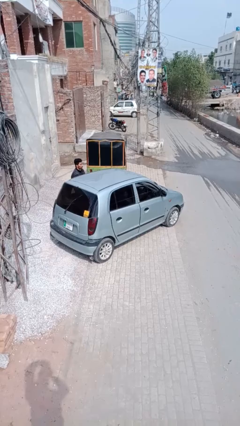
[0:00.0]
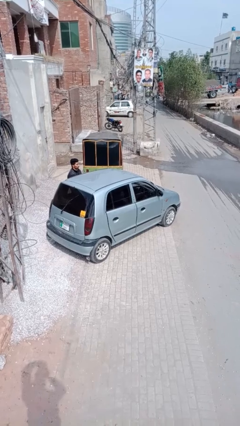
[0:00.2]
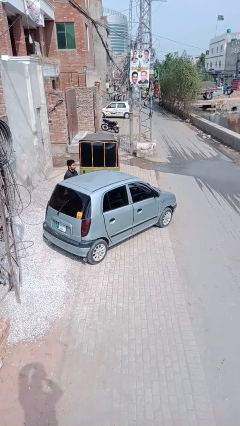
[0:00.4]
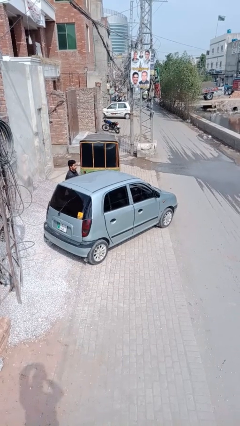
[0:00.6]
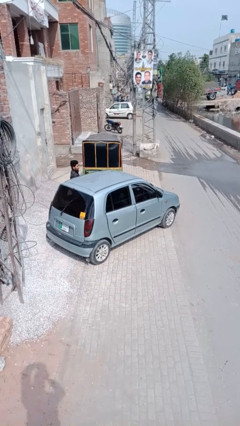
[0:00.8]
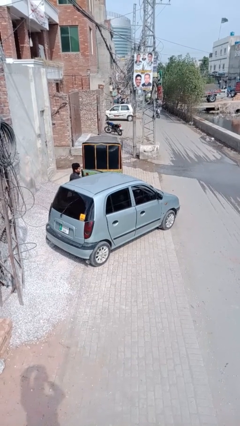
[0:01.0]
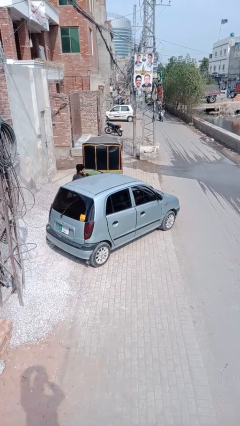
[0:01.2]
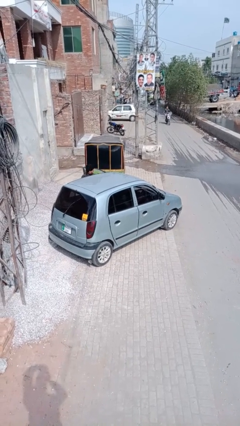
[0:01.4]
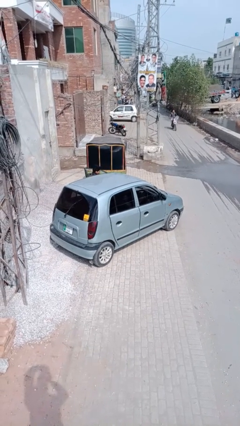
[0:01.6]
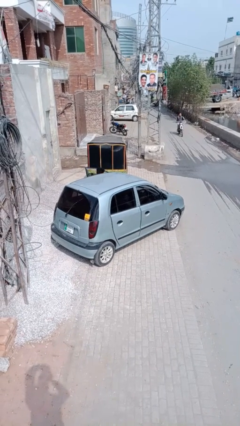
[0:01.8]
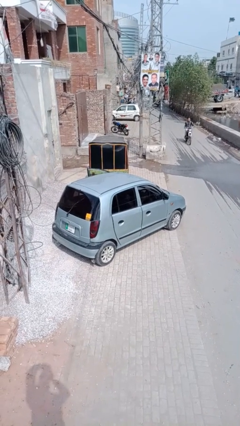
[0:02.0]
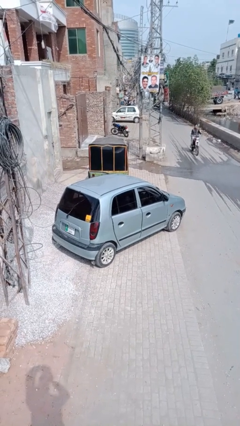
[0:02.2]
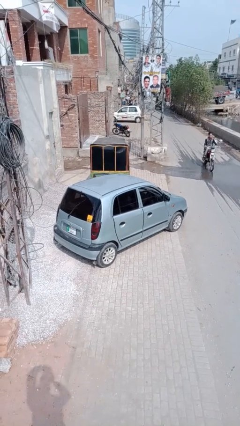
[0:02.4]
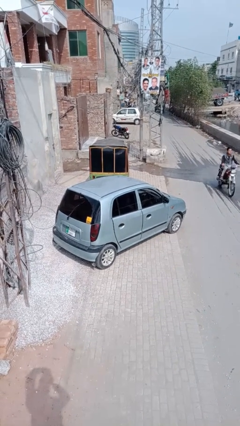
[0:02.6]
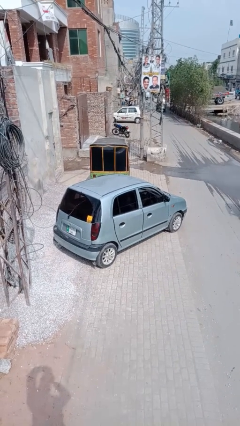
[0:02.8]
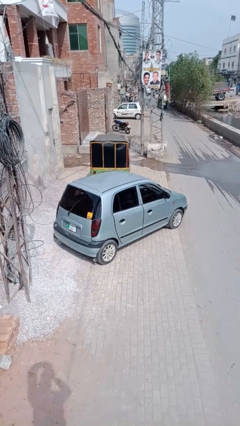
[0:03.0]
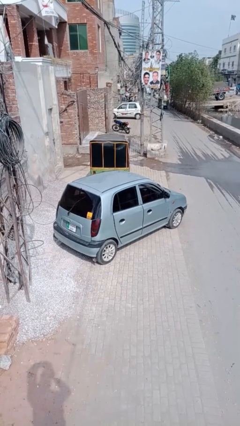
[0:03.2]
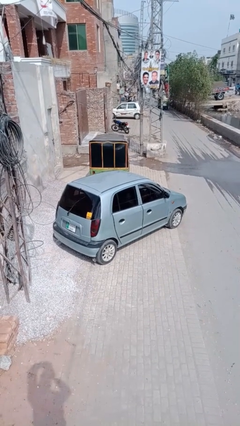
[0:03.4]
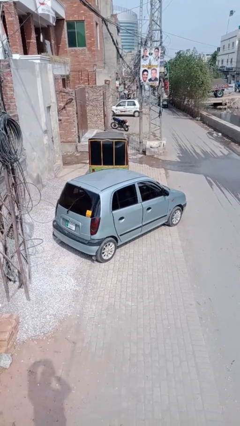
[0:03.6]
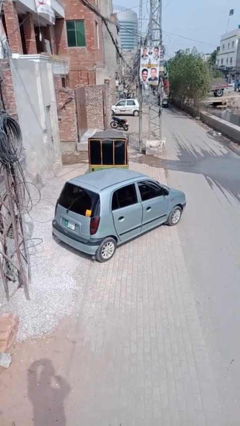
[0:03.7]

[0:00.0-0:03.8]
car picks up person

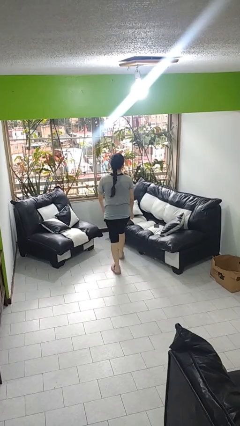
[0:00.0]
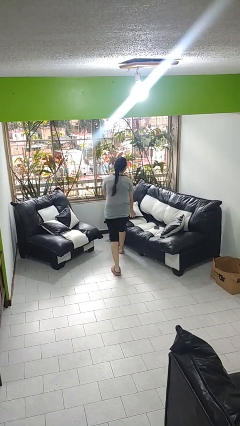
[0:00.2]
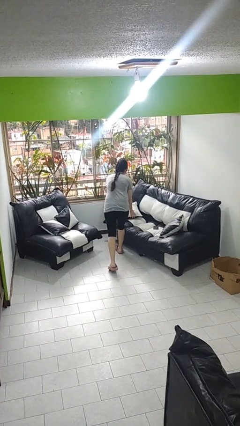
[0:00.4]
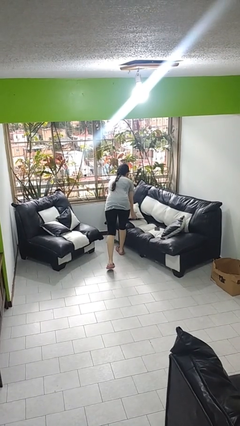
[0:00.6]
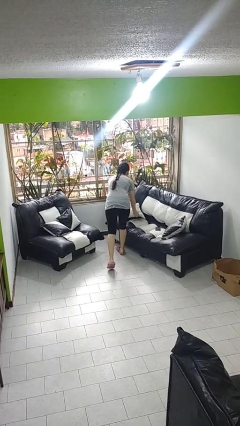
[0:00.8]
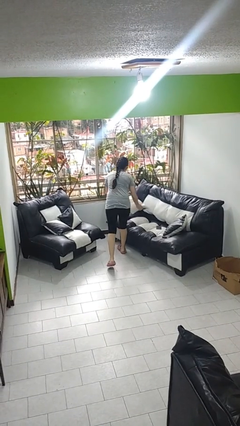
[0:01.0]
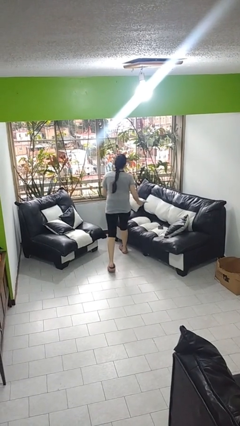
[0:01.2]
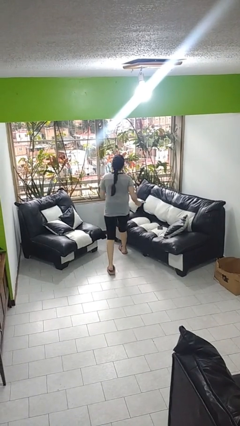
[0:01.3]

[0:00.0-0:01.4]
person picks up object from couch

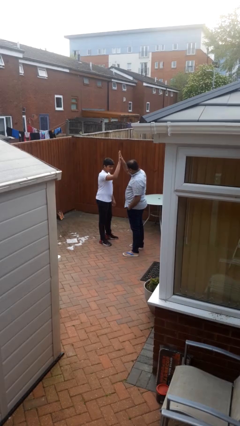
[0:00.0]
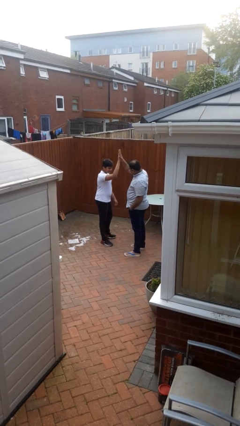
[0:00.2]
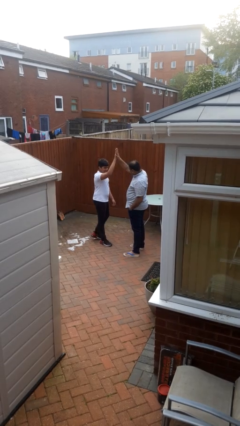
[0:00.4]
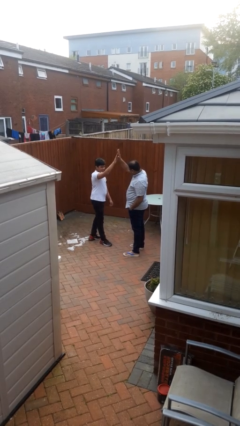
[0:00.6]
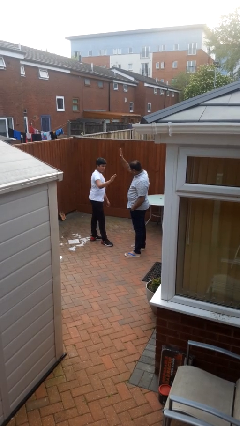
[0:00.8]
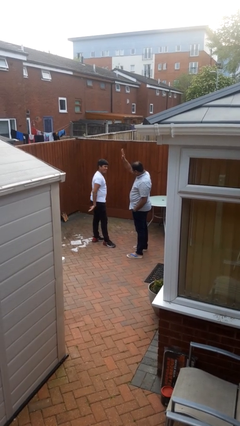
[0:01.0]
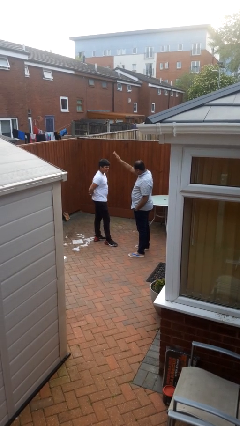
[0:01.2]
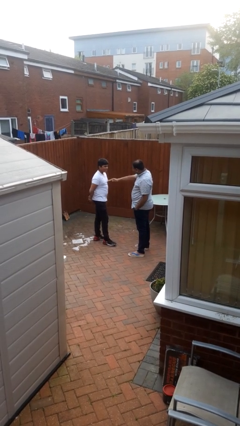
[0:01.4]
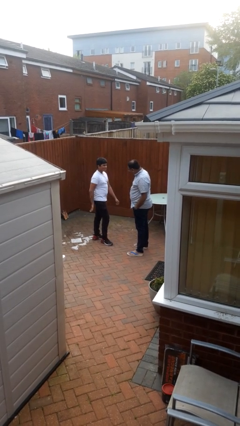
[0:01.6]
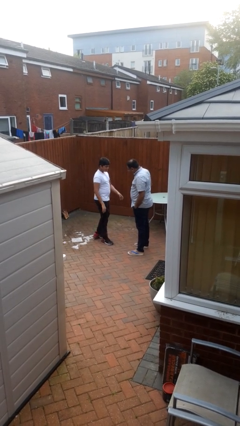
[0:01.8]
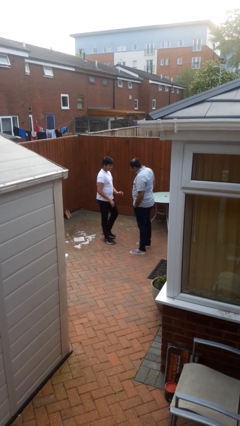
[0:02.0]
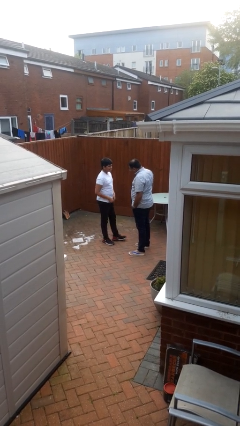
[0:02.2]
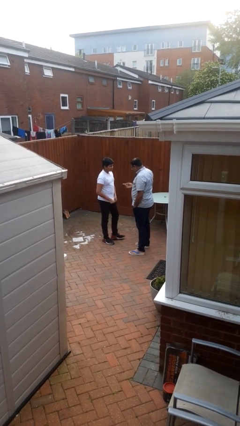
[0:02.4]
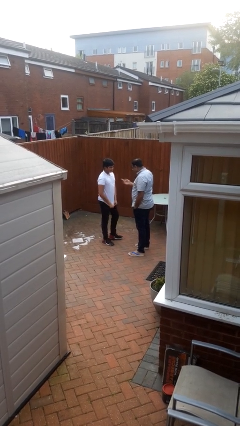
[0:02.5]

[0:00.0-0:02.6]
person highfives hand

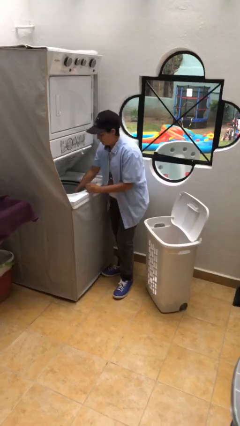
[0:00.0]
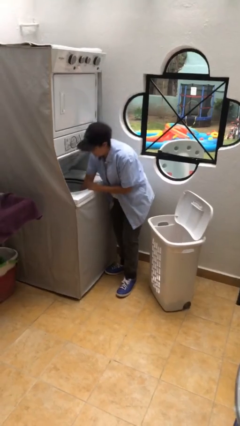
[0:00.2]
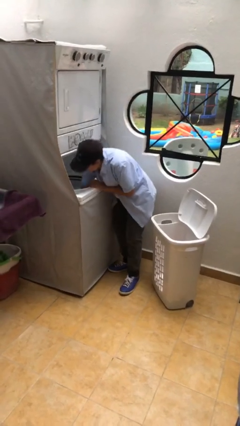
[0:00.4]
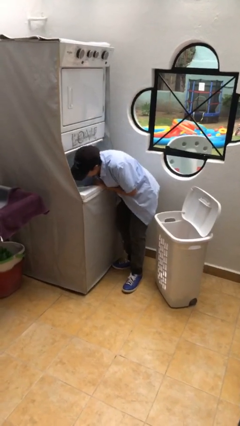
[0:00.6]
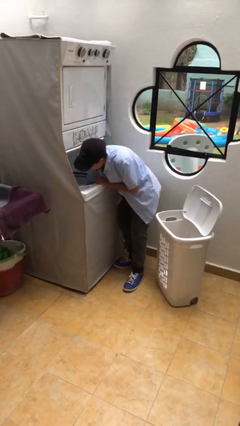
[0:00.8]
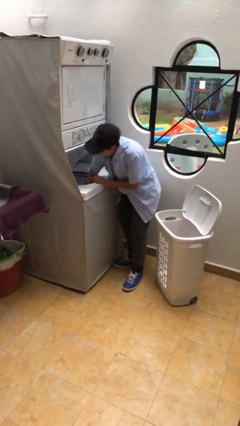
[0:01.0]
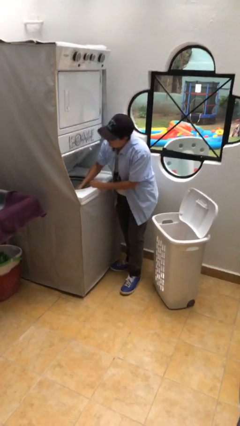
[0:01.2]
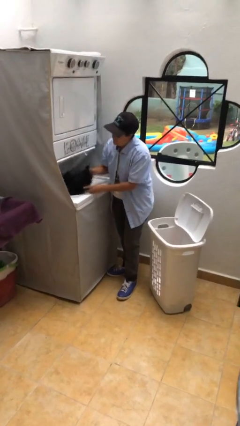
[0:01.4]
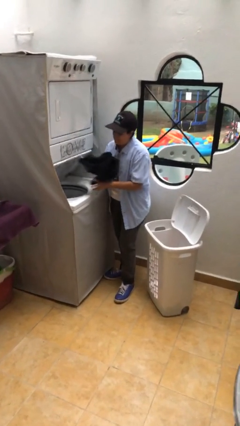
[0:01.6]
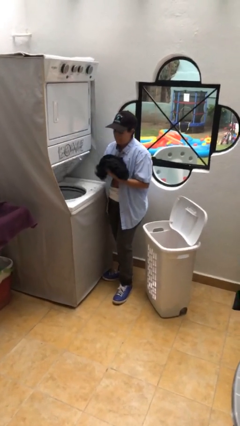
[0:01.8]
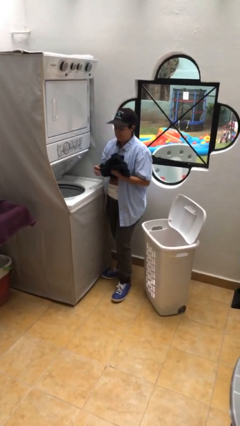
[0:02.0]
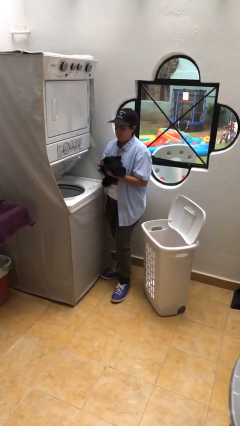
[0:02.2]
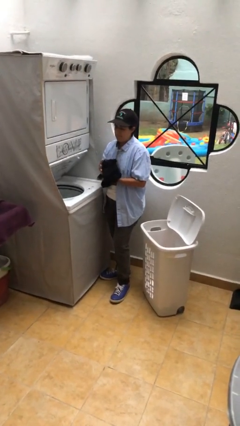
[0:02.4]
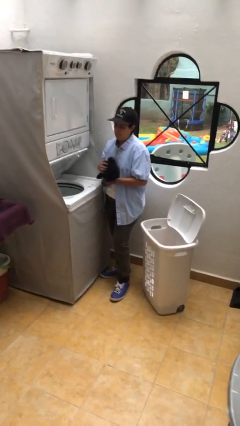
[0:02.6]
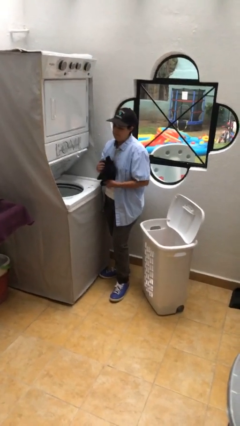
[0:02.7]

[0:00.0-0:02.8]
person unloads clotheswasher

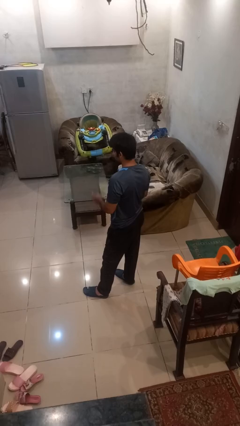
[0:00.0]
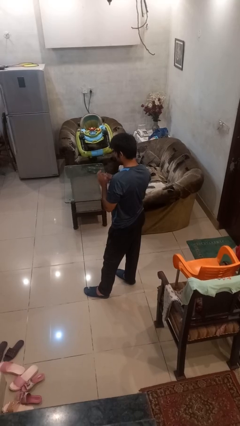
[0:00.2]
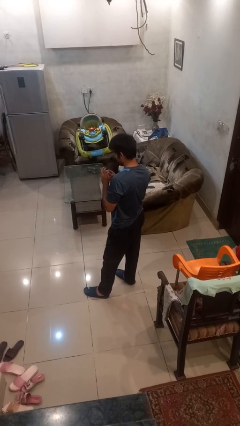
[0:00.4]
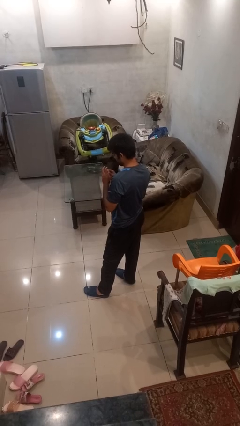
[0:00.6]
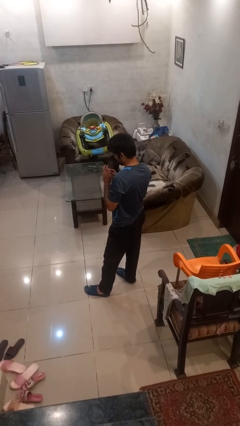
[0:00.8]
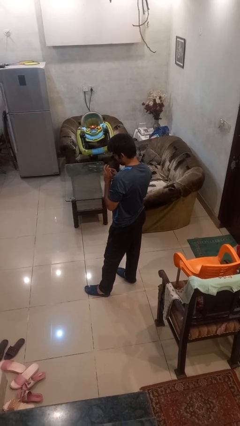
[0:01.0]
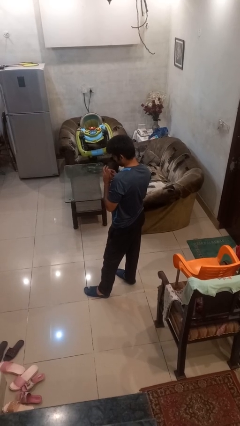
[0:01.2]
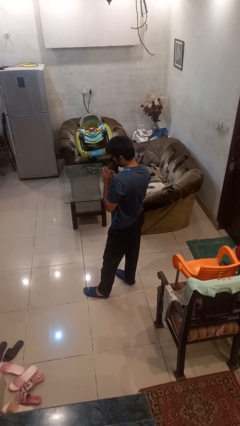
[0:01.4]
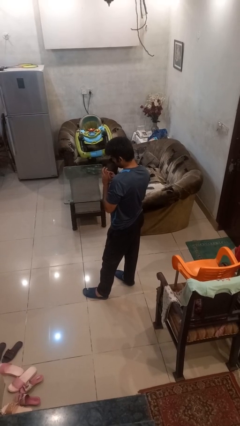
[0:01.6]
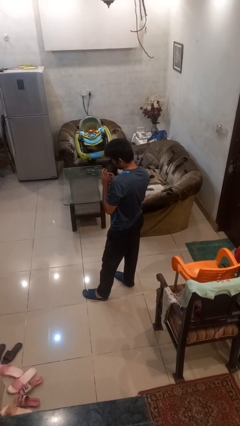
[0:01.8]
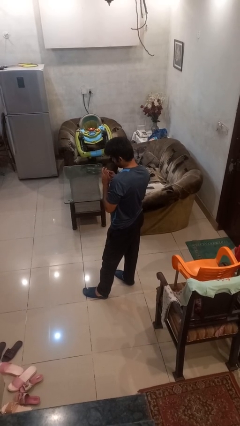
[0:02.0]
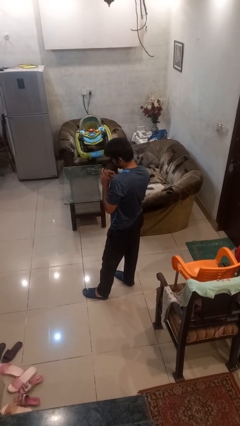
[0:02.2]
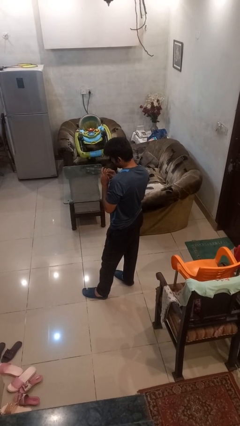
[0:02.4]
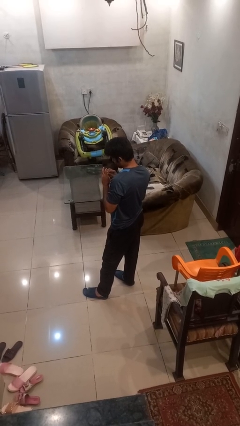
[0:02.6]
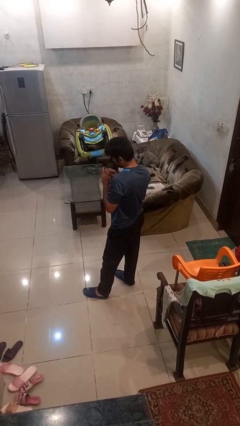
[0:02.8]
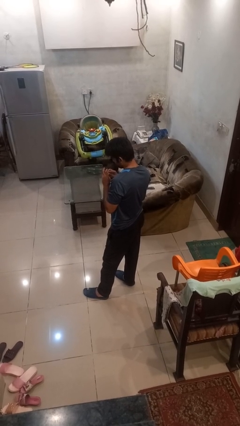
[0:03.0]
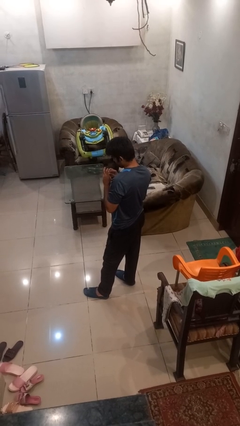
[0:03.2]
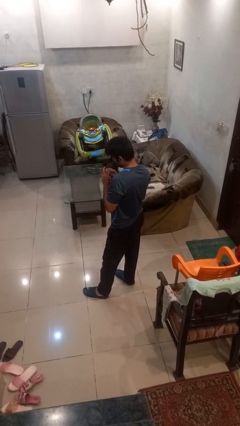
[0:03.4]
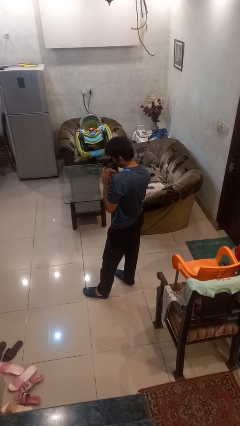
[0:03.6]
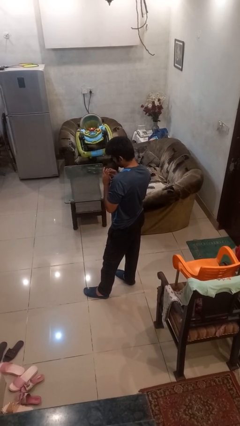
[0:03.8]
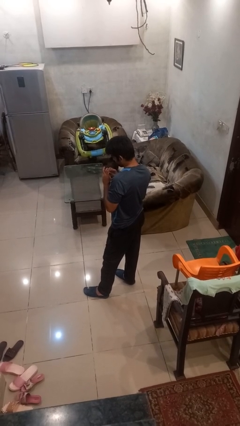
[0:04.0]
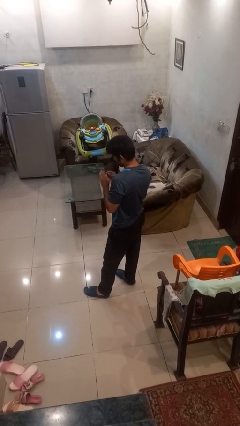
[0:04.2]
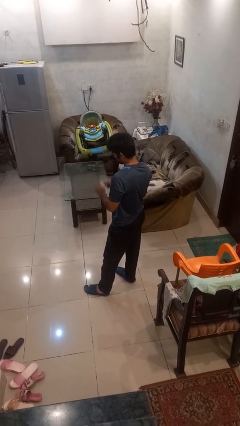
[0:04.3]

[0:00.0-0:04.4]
person files fingernails

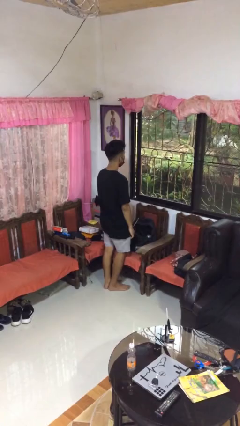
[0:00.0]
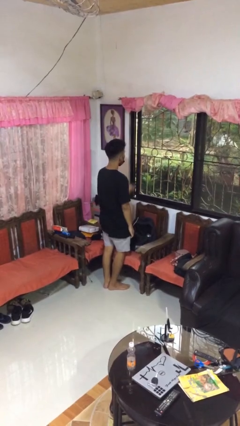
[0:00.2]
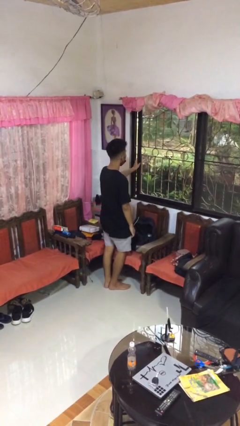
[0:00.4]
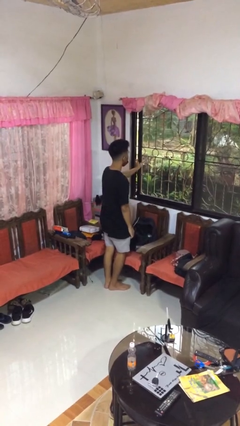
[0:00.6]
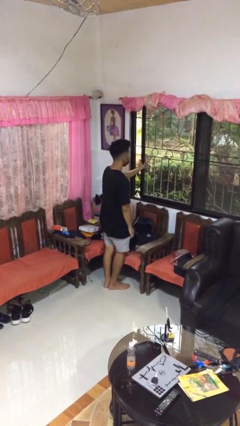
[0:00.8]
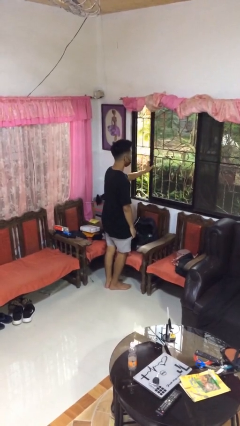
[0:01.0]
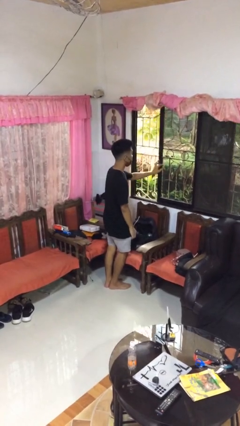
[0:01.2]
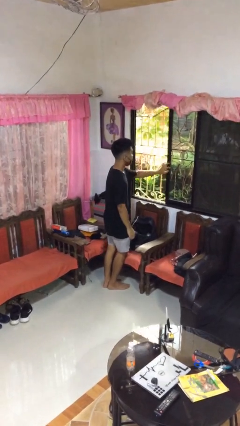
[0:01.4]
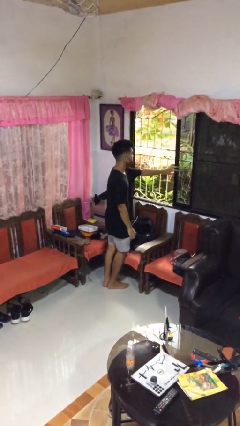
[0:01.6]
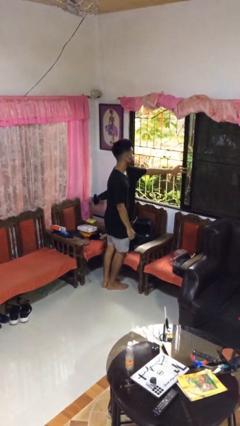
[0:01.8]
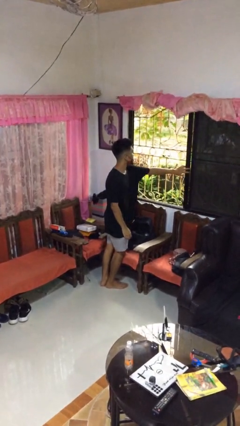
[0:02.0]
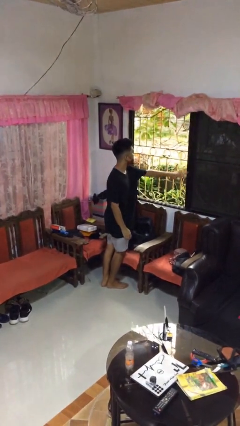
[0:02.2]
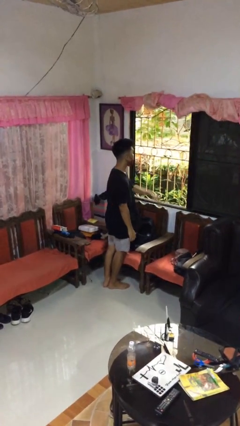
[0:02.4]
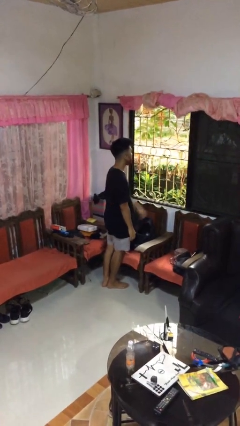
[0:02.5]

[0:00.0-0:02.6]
person opens home window
